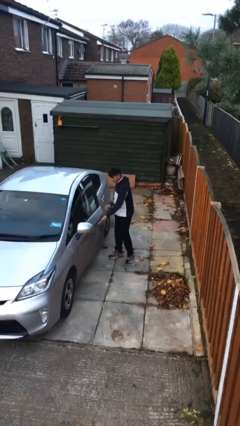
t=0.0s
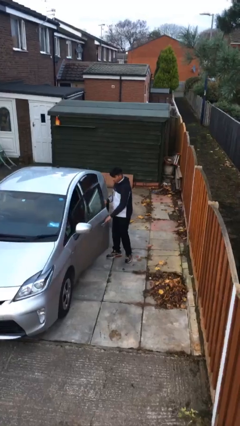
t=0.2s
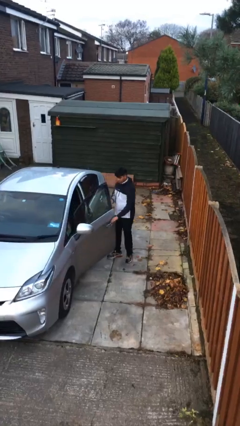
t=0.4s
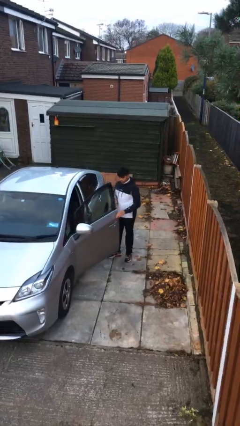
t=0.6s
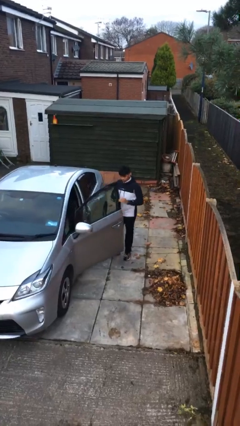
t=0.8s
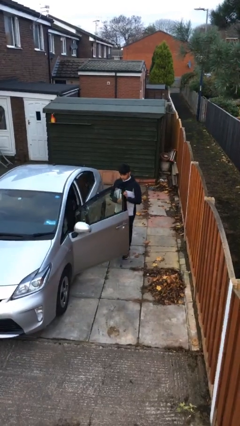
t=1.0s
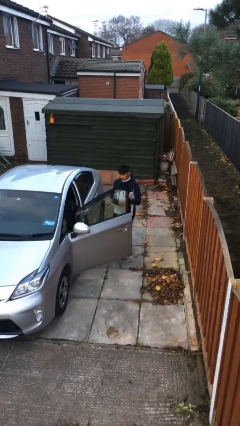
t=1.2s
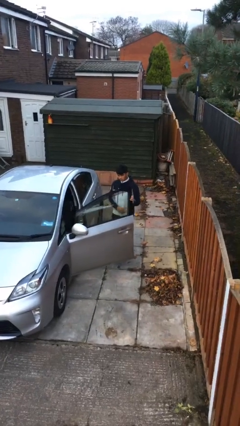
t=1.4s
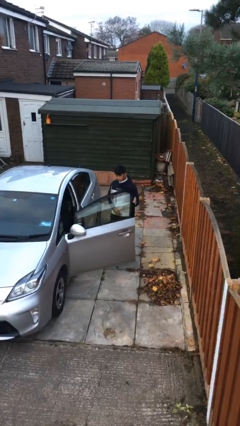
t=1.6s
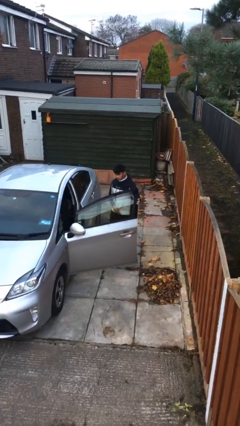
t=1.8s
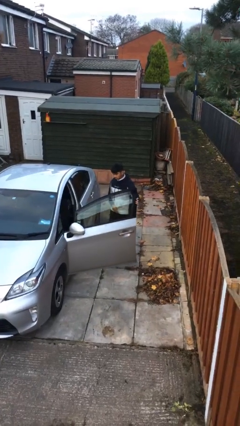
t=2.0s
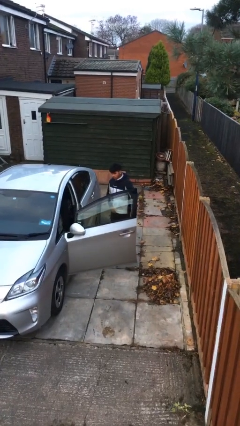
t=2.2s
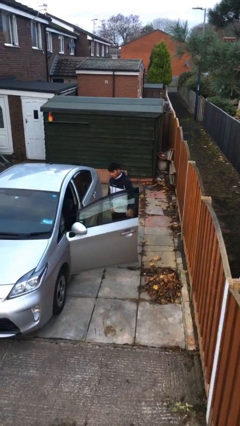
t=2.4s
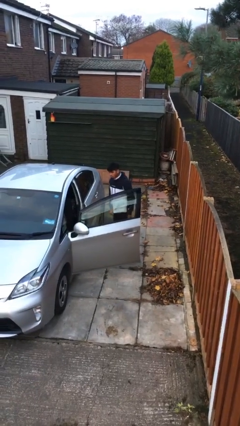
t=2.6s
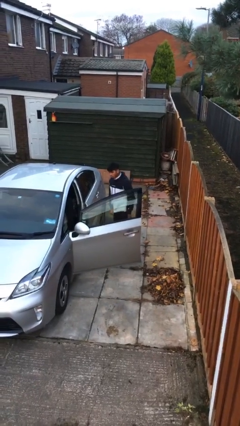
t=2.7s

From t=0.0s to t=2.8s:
person opens car door

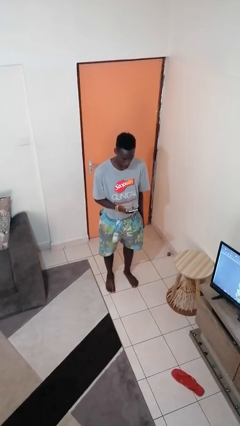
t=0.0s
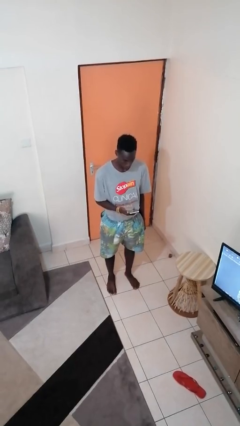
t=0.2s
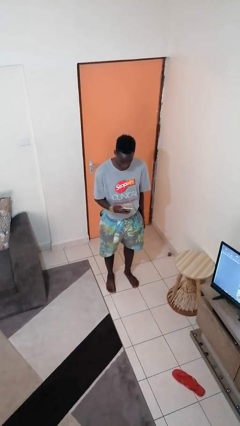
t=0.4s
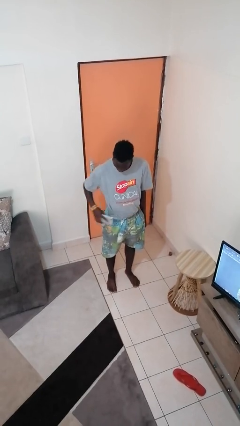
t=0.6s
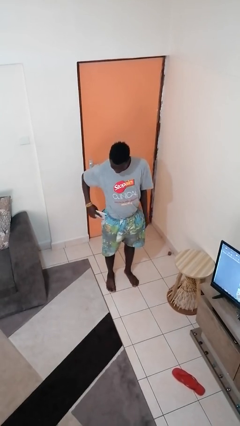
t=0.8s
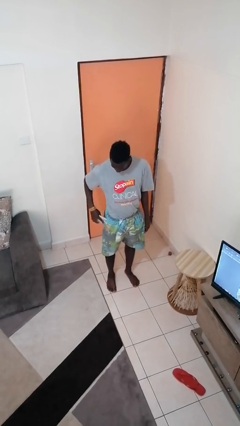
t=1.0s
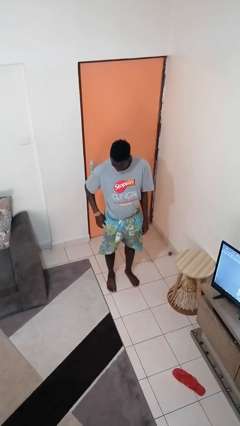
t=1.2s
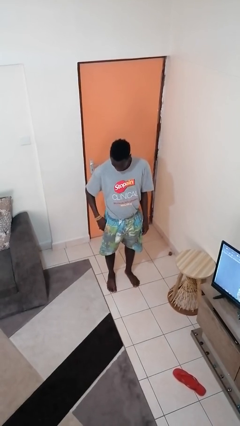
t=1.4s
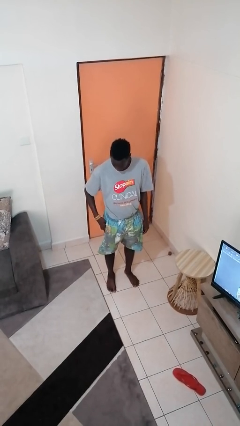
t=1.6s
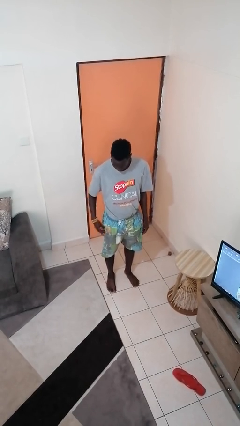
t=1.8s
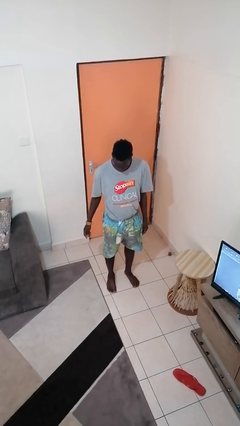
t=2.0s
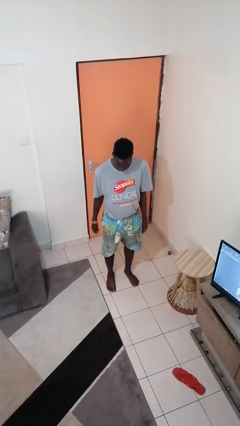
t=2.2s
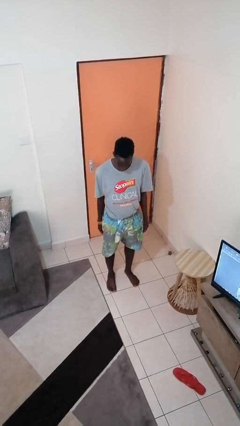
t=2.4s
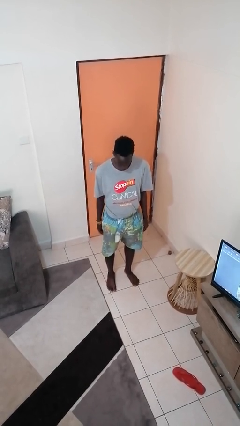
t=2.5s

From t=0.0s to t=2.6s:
person puts phone into pocket

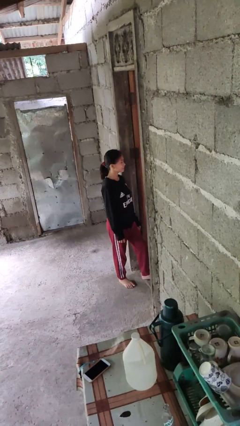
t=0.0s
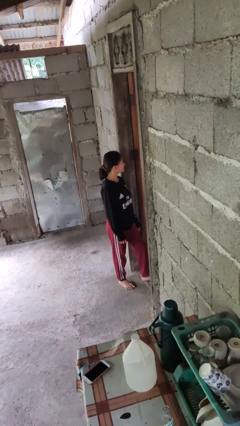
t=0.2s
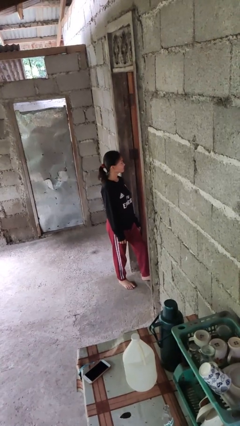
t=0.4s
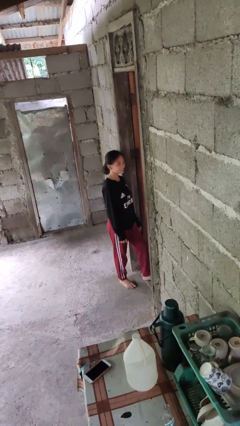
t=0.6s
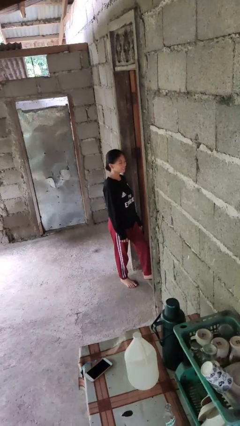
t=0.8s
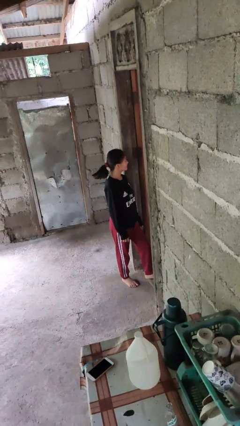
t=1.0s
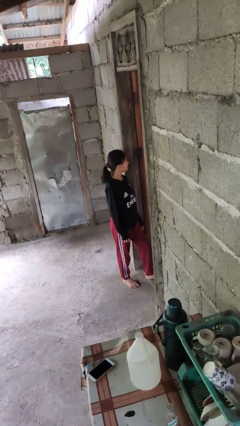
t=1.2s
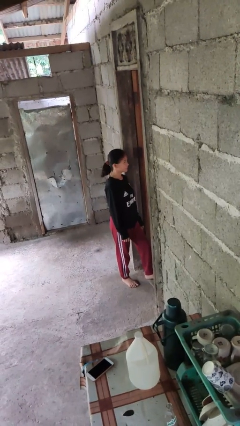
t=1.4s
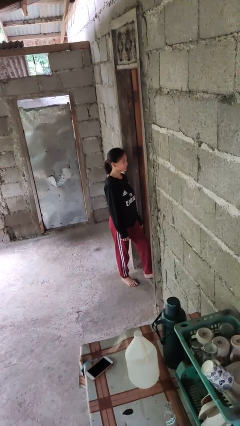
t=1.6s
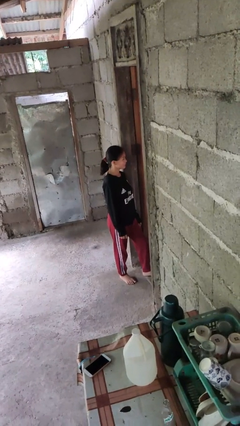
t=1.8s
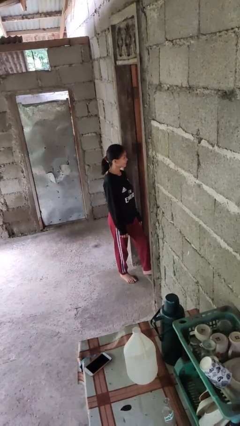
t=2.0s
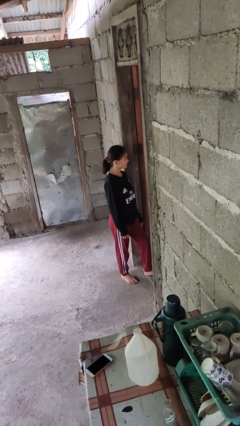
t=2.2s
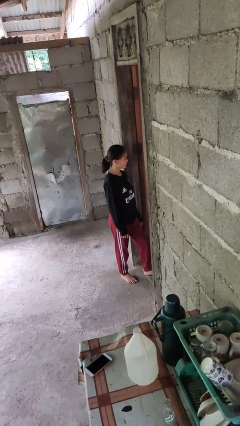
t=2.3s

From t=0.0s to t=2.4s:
person shakes head

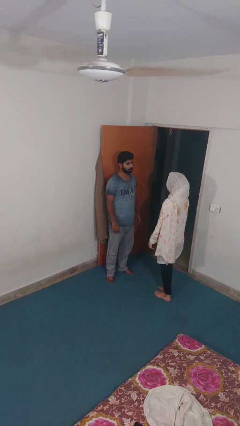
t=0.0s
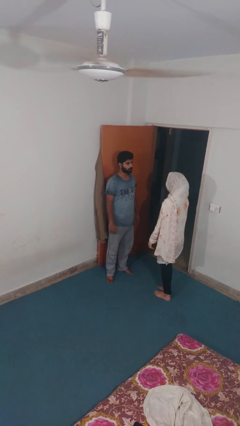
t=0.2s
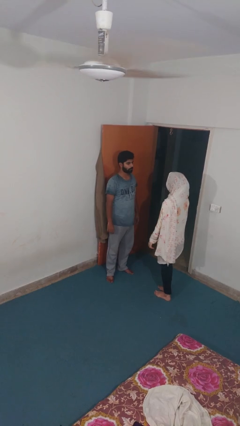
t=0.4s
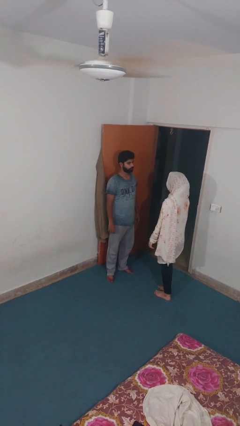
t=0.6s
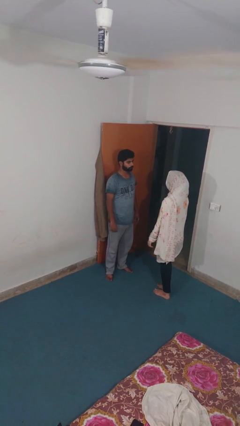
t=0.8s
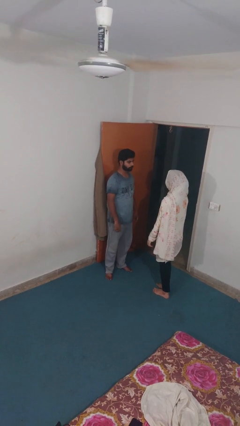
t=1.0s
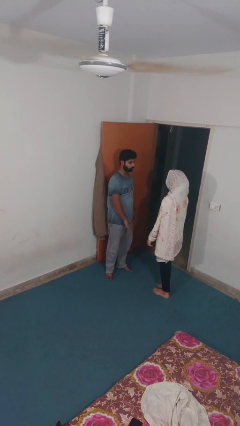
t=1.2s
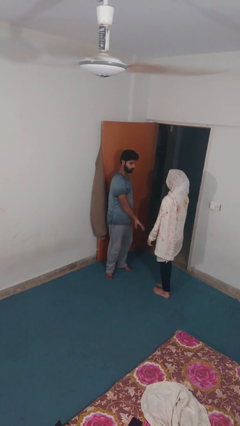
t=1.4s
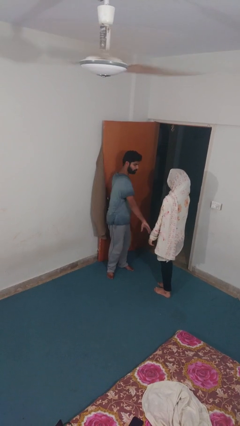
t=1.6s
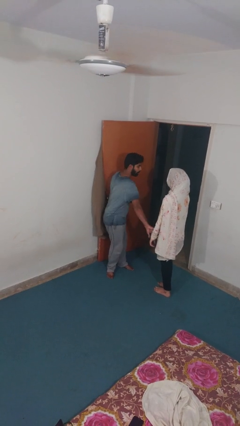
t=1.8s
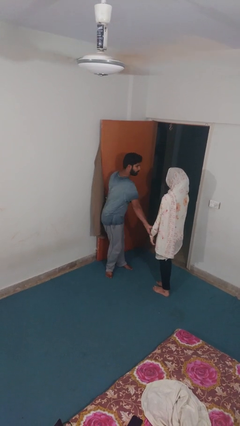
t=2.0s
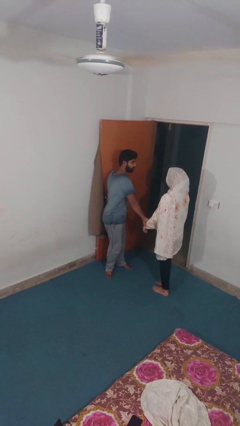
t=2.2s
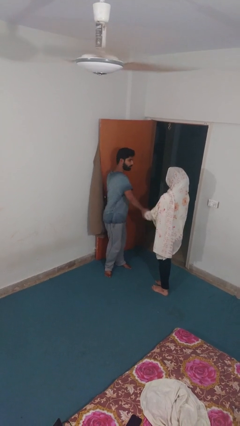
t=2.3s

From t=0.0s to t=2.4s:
person grabs person by forearm

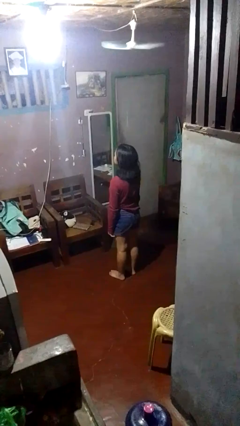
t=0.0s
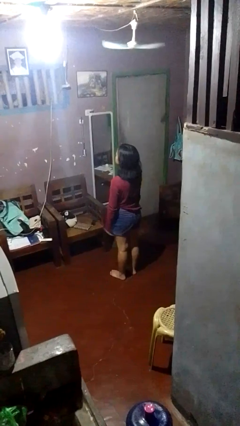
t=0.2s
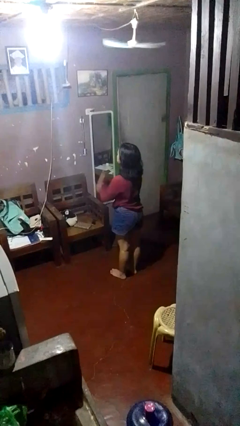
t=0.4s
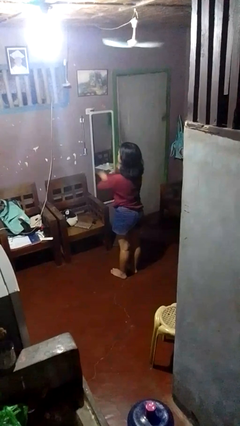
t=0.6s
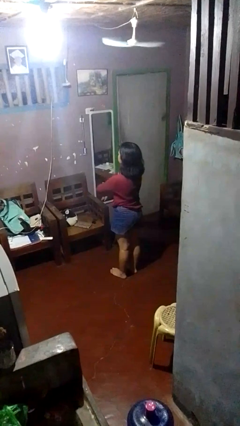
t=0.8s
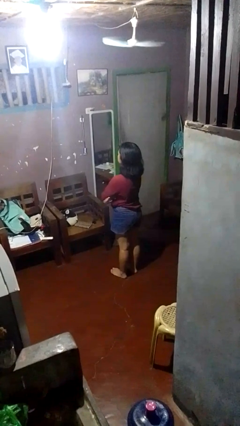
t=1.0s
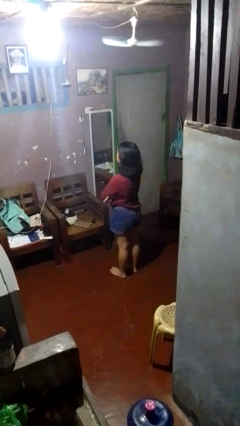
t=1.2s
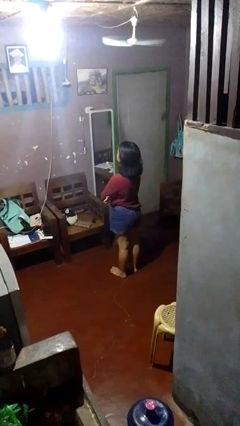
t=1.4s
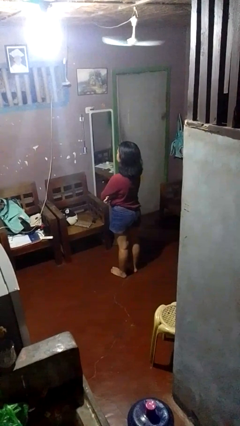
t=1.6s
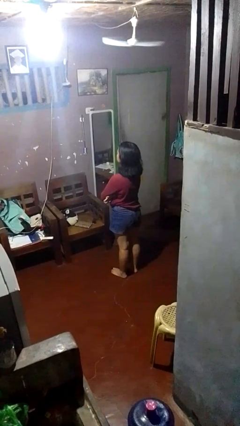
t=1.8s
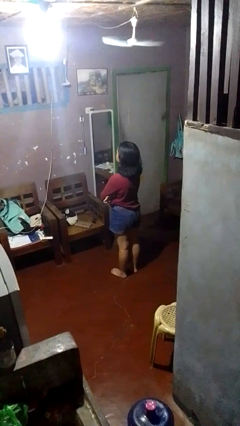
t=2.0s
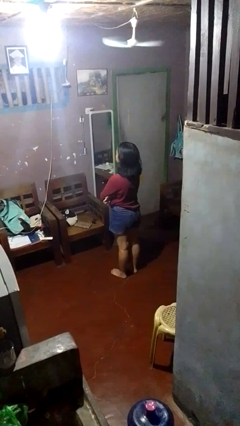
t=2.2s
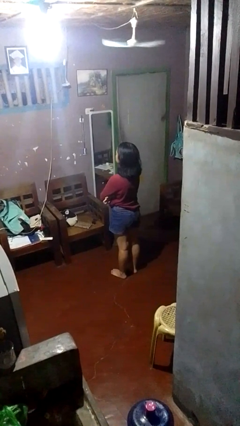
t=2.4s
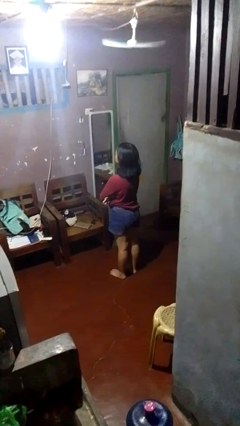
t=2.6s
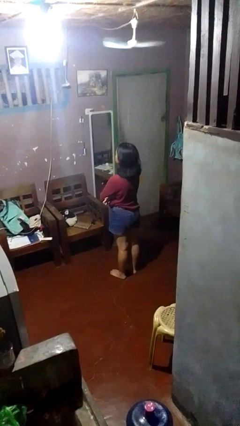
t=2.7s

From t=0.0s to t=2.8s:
person crosses arms

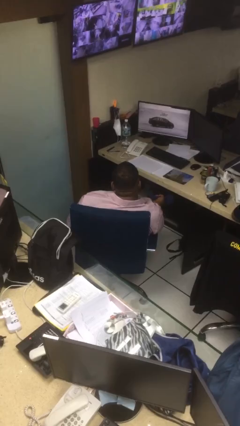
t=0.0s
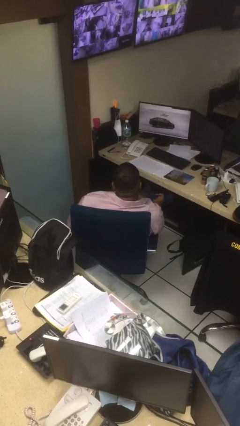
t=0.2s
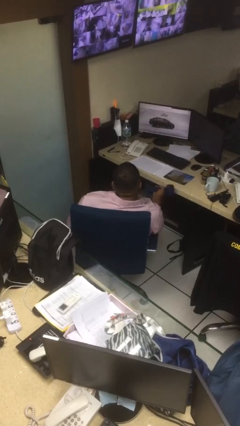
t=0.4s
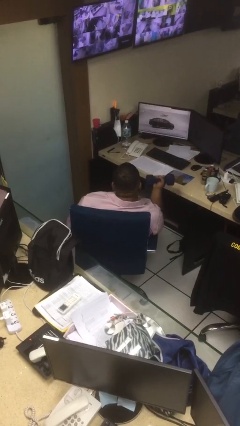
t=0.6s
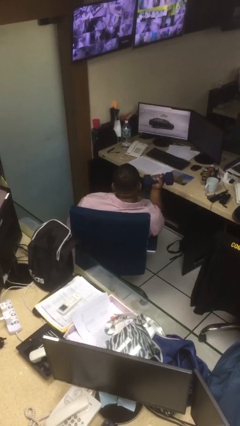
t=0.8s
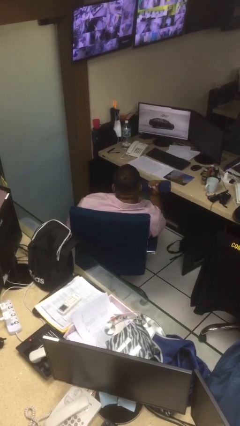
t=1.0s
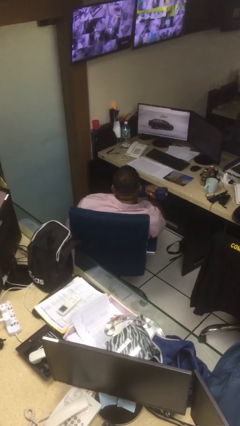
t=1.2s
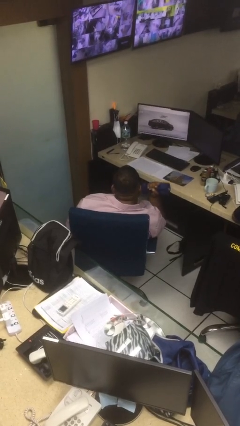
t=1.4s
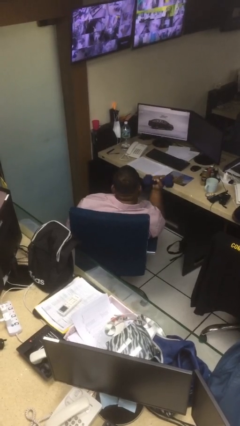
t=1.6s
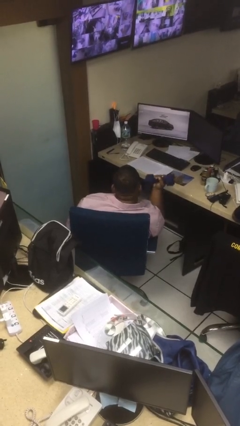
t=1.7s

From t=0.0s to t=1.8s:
person lifts dumbbells

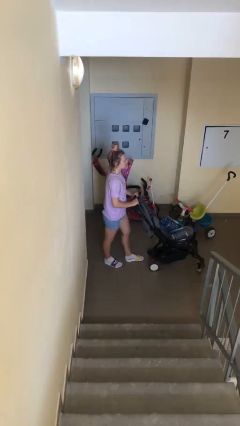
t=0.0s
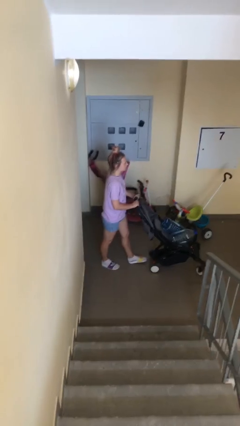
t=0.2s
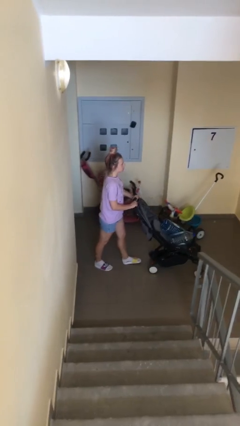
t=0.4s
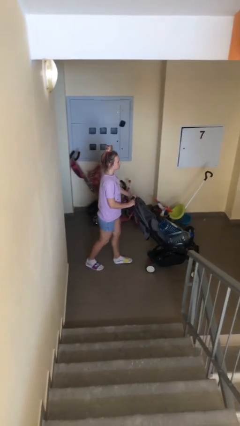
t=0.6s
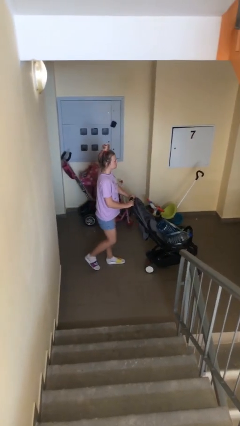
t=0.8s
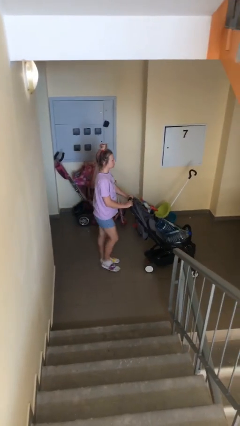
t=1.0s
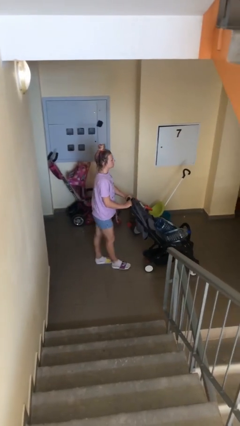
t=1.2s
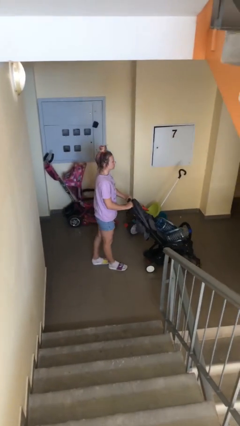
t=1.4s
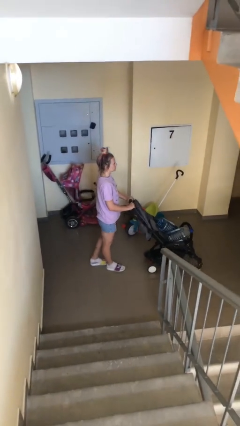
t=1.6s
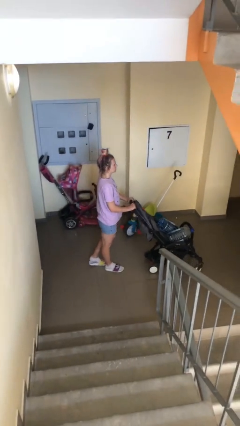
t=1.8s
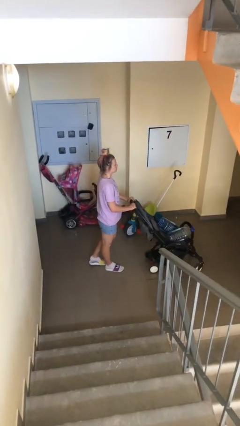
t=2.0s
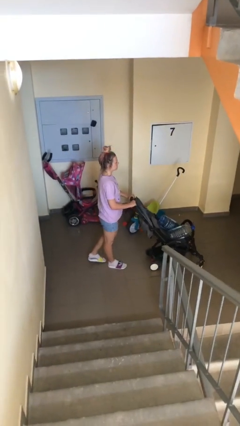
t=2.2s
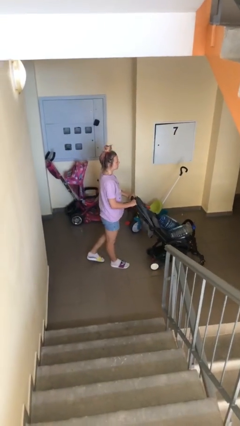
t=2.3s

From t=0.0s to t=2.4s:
person pushes wheeled cart
